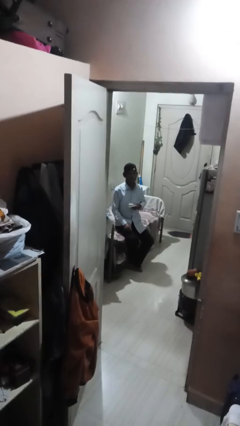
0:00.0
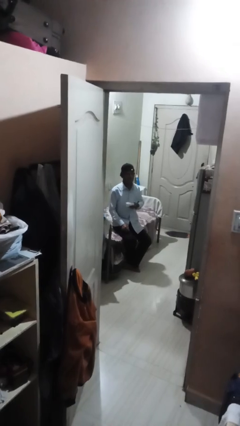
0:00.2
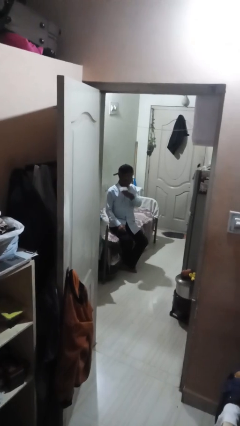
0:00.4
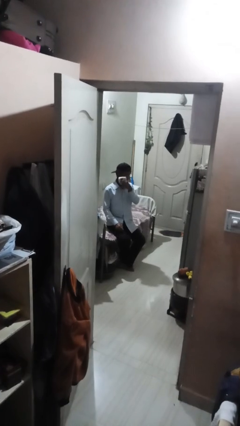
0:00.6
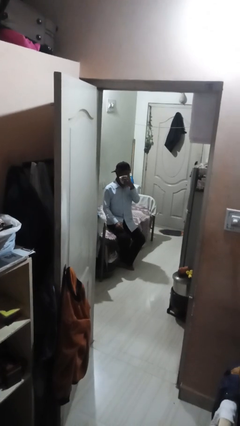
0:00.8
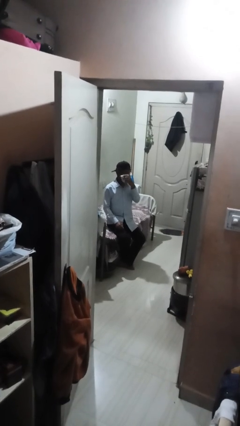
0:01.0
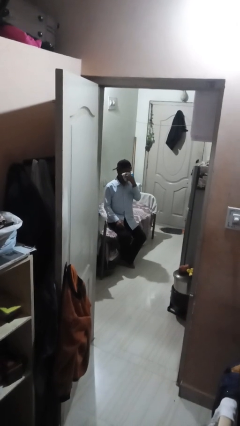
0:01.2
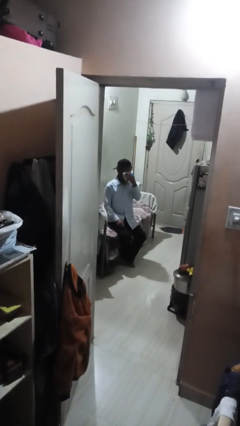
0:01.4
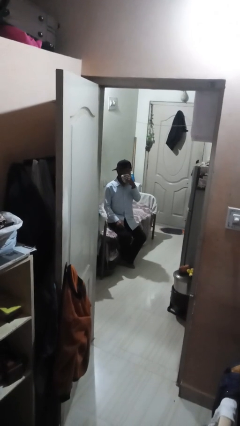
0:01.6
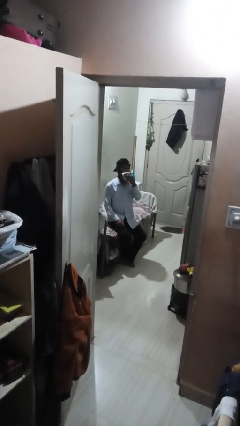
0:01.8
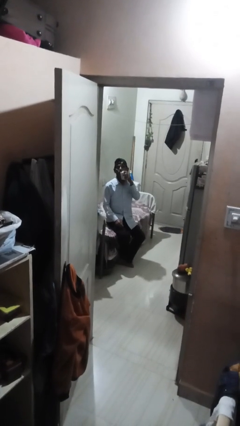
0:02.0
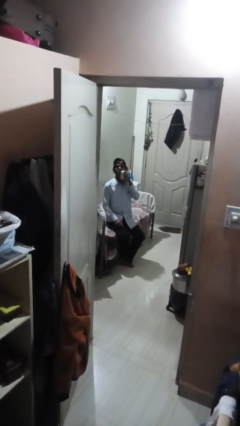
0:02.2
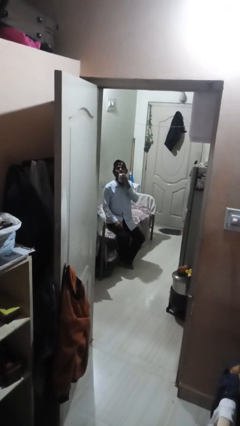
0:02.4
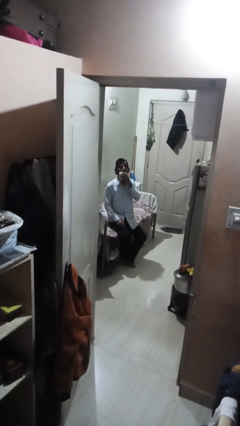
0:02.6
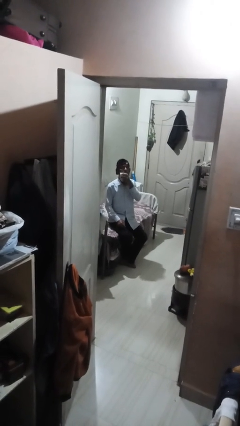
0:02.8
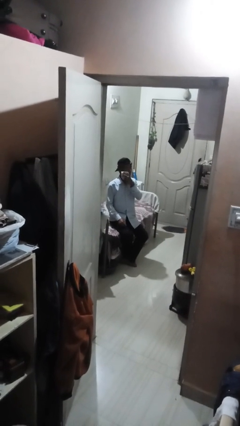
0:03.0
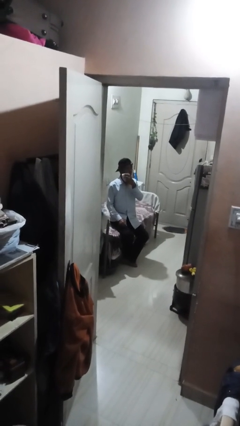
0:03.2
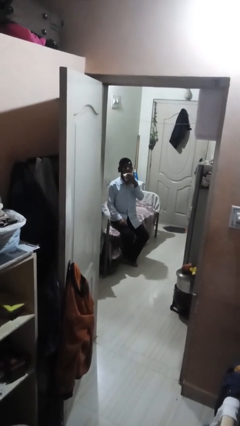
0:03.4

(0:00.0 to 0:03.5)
person wipes mouth with napkin

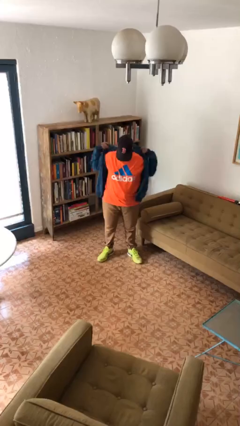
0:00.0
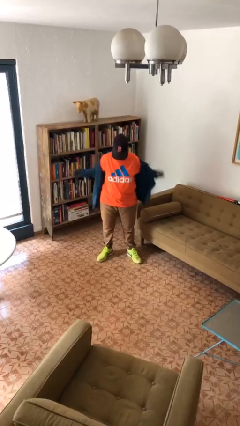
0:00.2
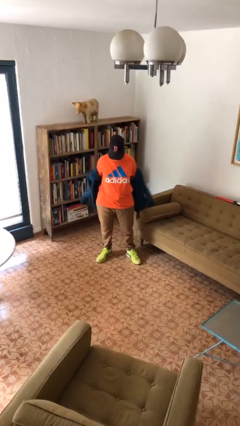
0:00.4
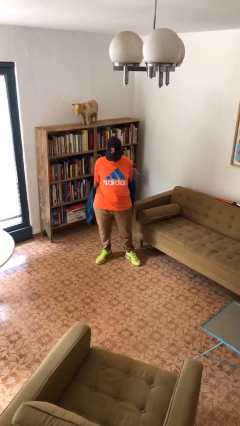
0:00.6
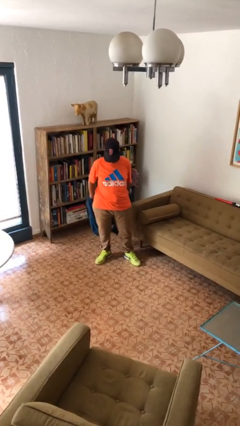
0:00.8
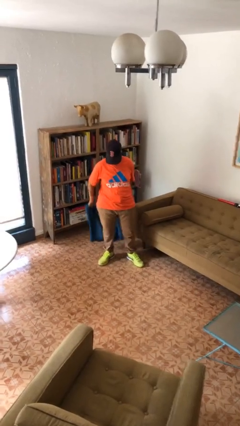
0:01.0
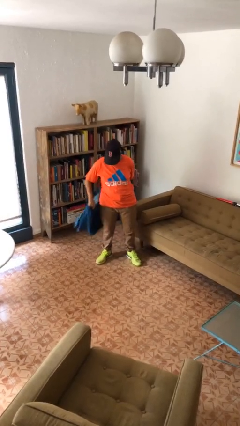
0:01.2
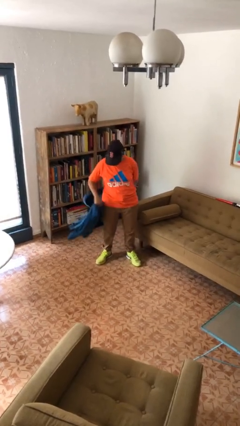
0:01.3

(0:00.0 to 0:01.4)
person takes off jacket

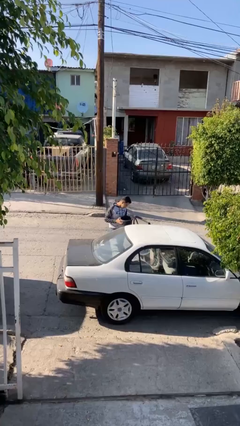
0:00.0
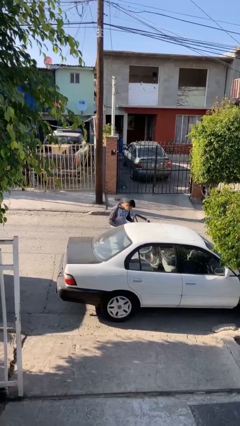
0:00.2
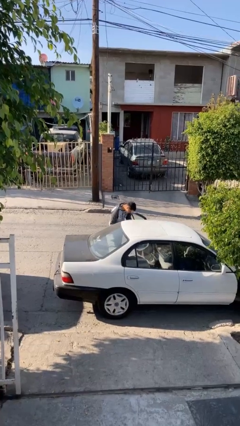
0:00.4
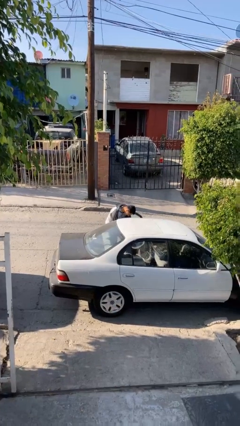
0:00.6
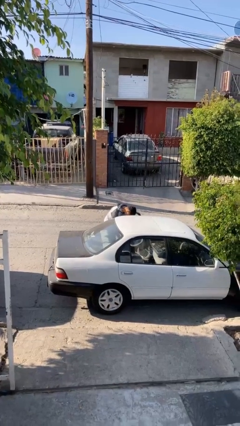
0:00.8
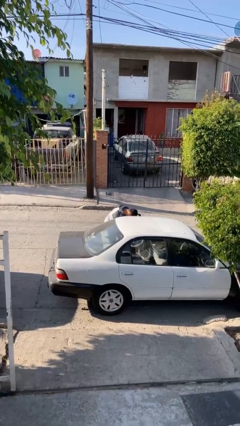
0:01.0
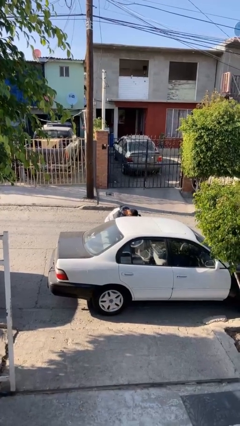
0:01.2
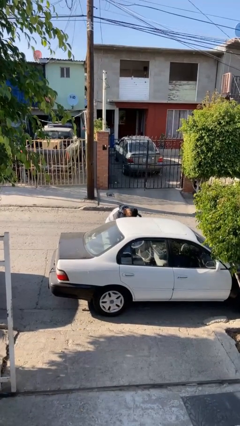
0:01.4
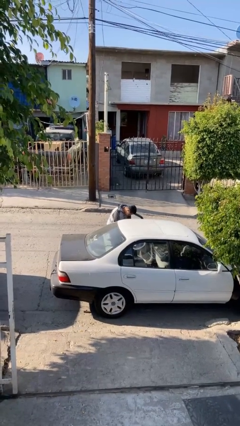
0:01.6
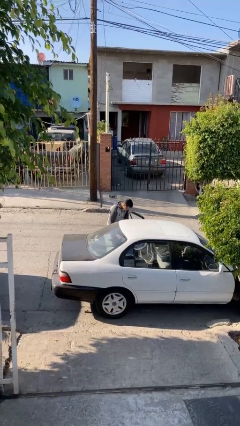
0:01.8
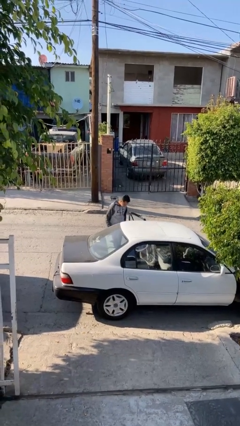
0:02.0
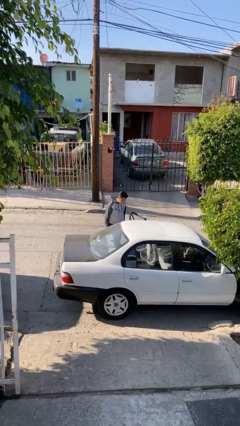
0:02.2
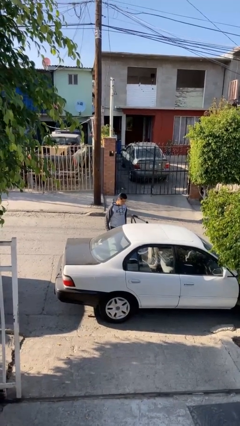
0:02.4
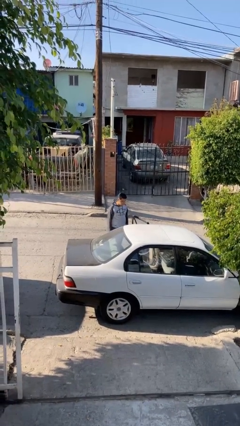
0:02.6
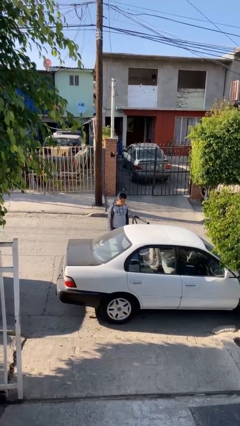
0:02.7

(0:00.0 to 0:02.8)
person loads car

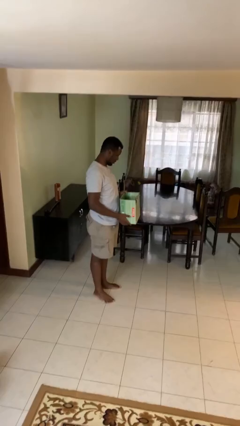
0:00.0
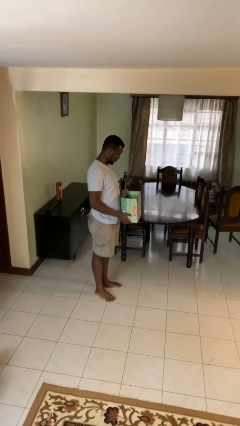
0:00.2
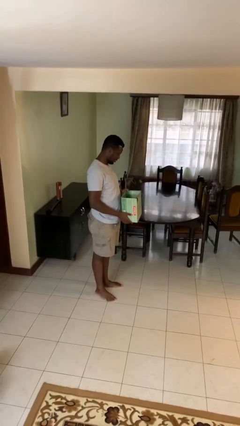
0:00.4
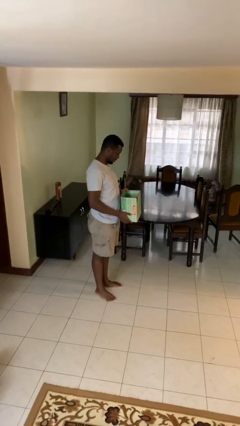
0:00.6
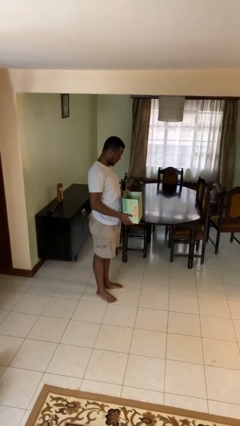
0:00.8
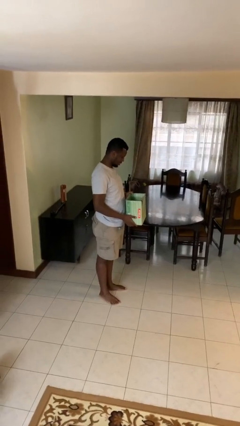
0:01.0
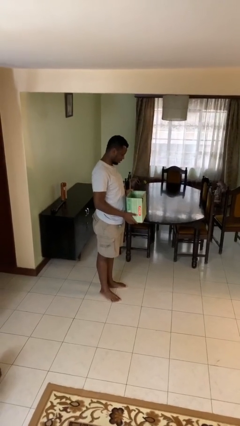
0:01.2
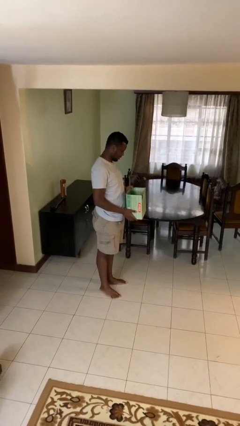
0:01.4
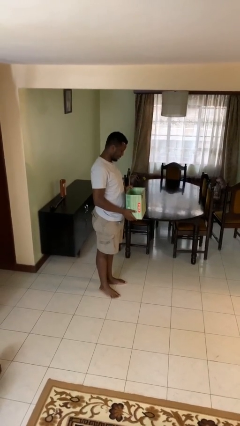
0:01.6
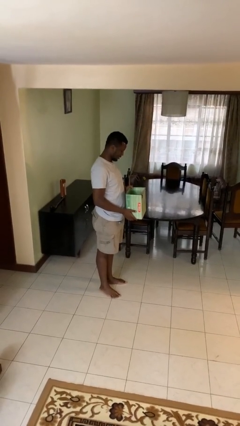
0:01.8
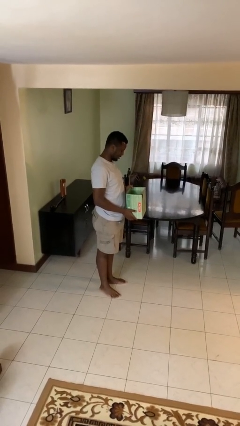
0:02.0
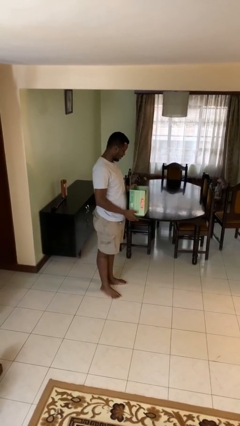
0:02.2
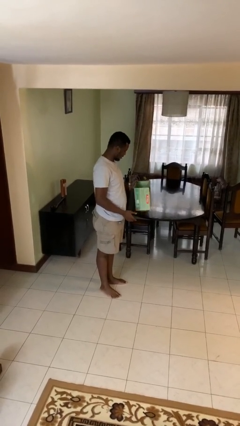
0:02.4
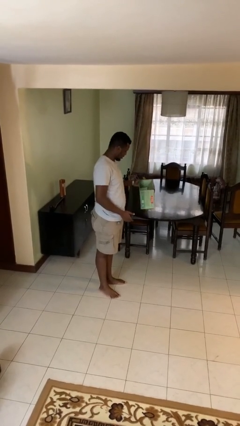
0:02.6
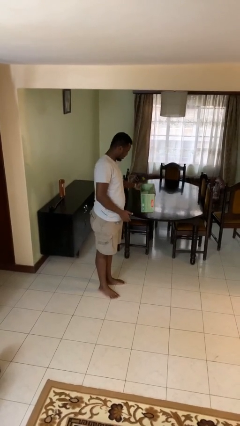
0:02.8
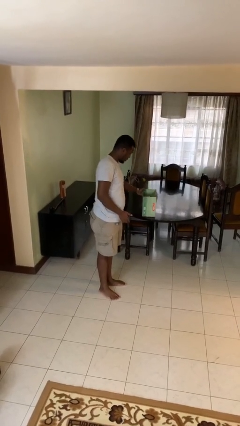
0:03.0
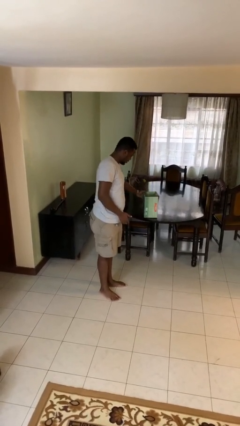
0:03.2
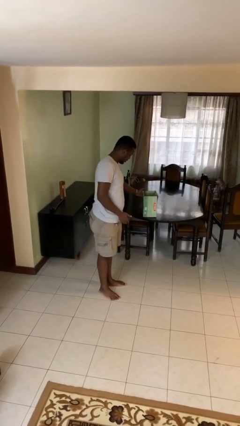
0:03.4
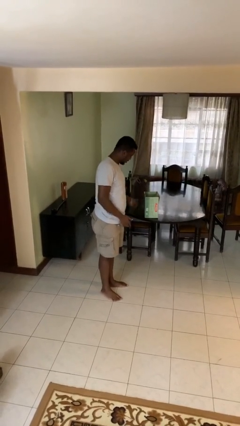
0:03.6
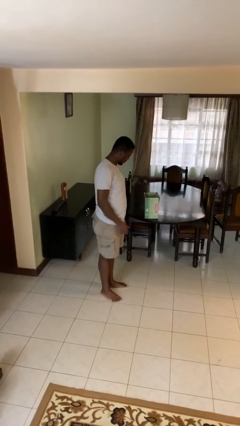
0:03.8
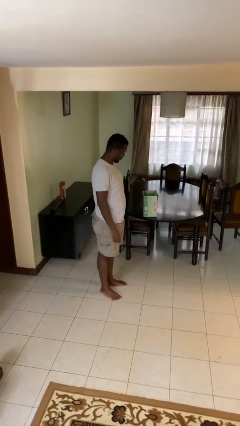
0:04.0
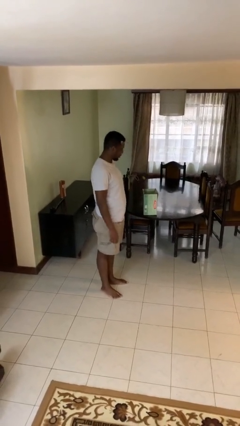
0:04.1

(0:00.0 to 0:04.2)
person puts down object on table

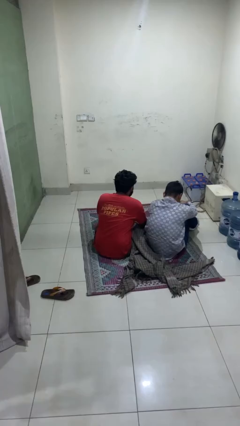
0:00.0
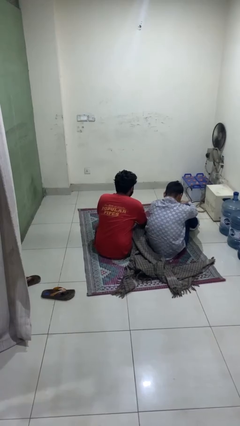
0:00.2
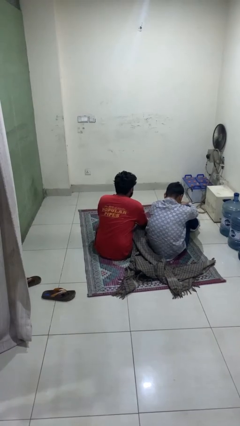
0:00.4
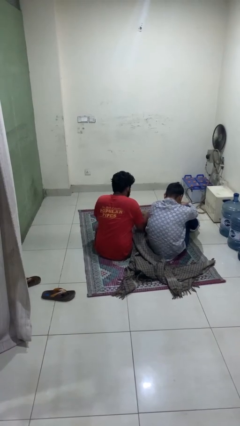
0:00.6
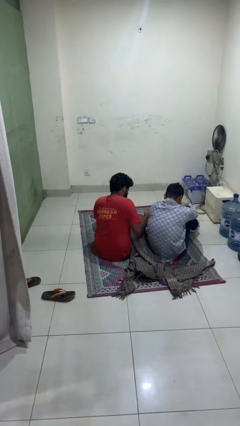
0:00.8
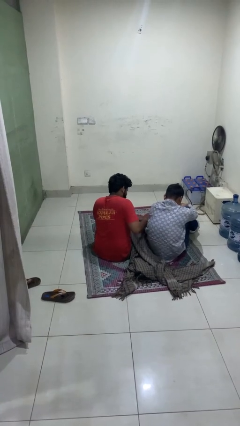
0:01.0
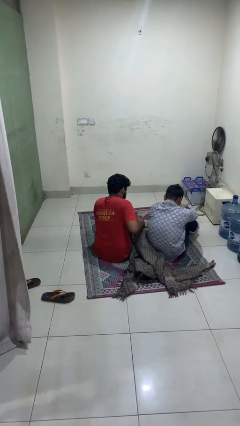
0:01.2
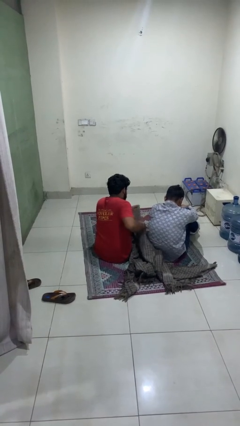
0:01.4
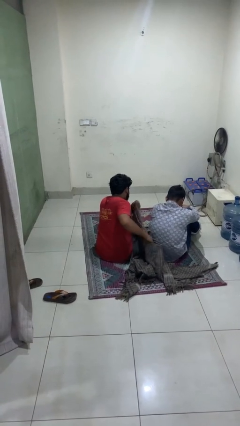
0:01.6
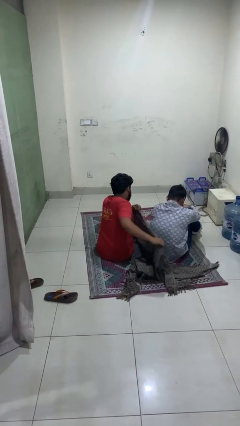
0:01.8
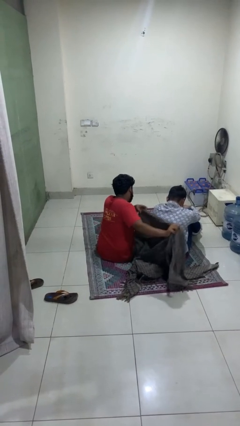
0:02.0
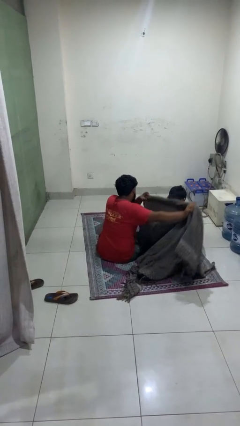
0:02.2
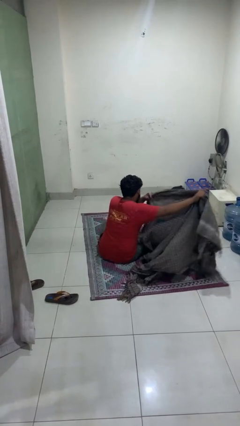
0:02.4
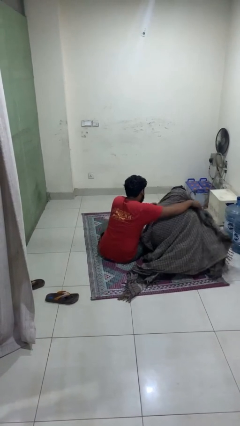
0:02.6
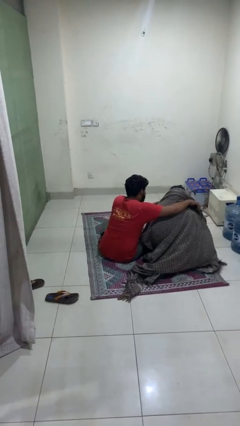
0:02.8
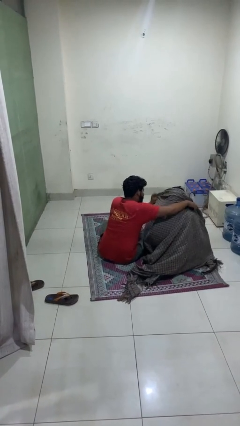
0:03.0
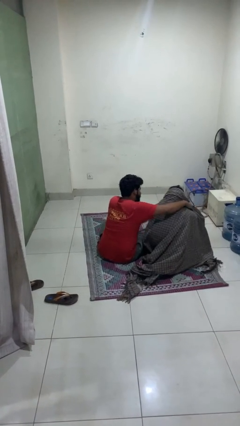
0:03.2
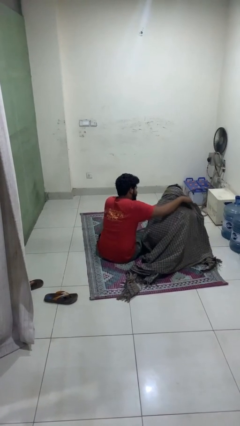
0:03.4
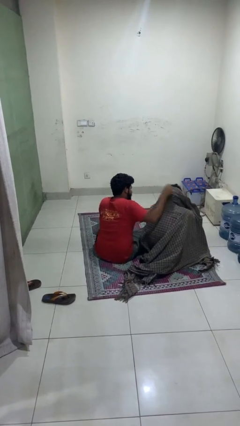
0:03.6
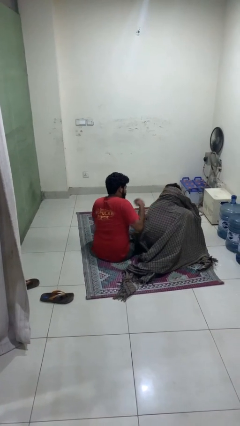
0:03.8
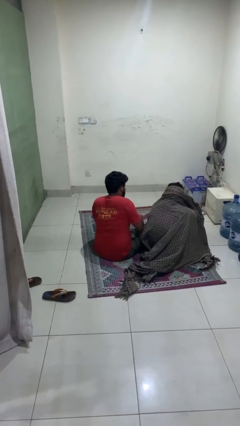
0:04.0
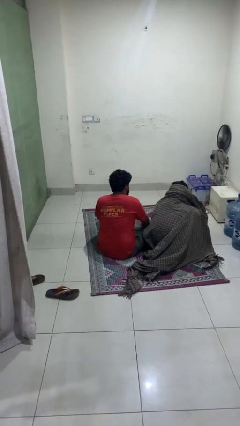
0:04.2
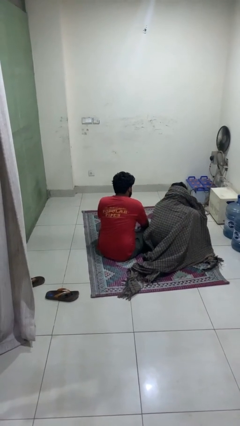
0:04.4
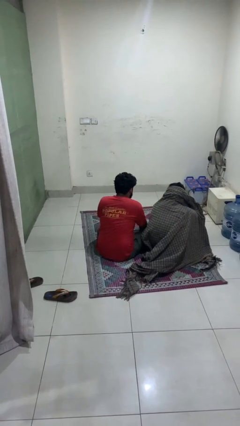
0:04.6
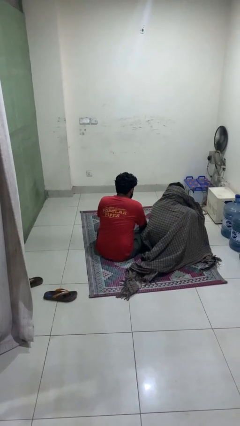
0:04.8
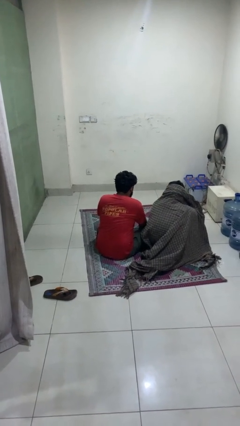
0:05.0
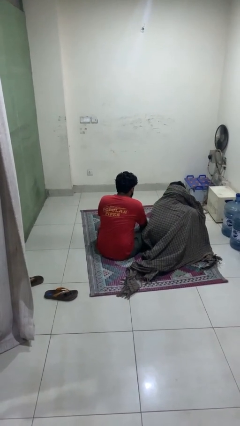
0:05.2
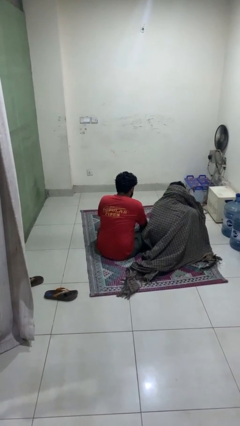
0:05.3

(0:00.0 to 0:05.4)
person covers friend with blanket
